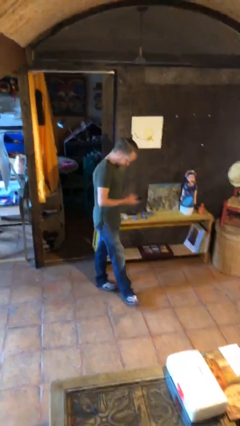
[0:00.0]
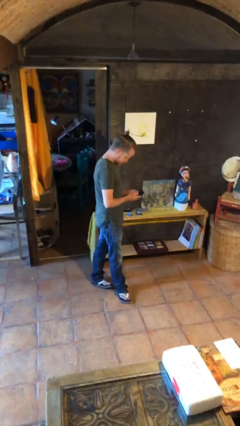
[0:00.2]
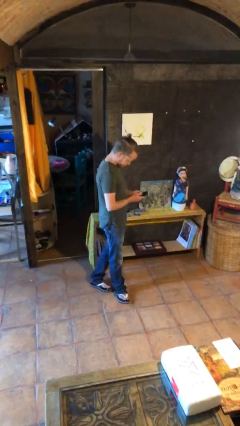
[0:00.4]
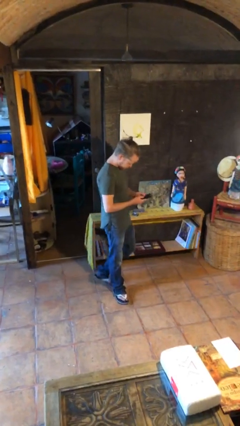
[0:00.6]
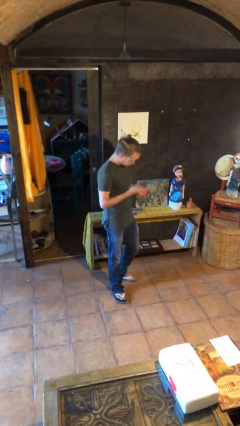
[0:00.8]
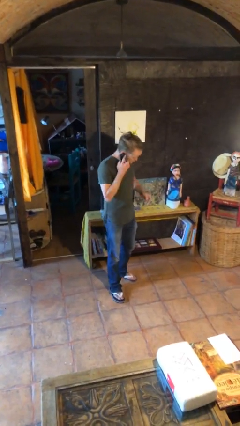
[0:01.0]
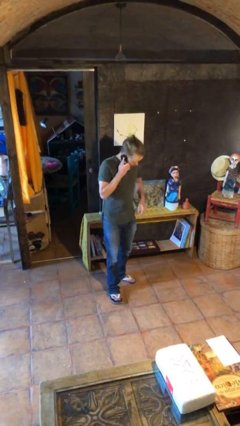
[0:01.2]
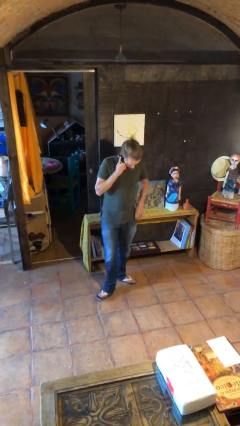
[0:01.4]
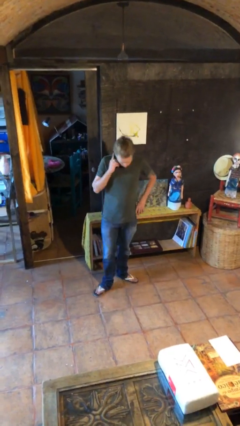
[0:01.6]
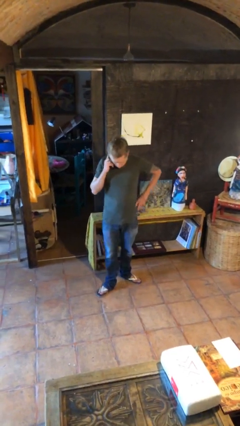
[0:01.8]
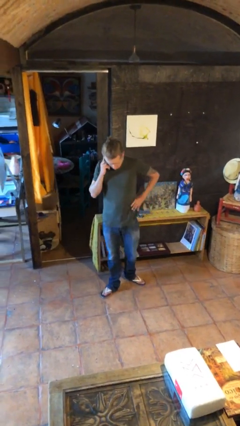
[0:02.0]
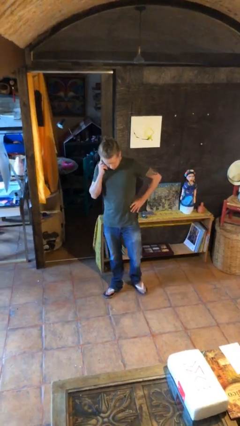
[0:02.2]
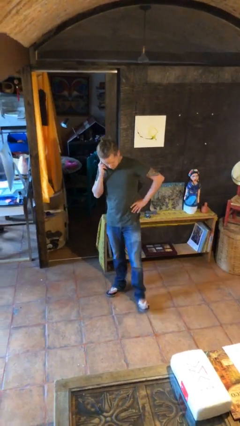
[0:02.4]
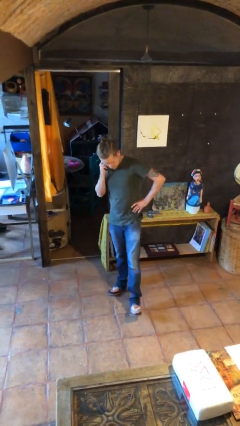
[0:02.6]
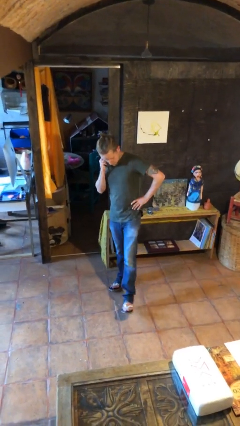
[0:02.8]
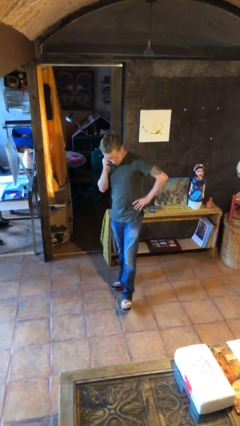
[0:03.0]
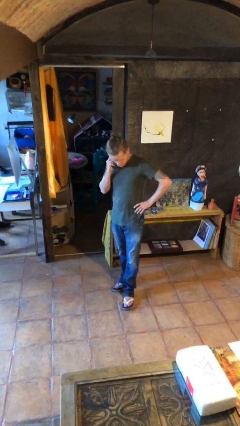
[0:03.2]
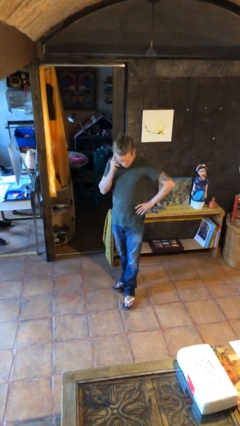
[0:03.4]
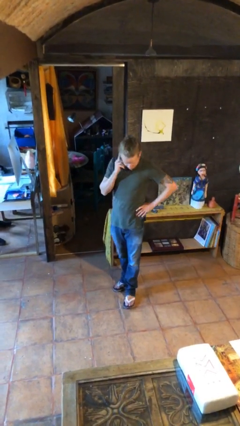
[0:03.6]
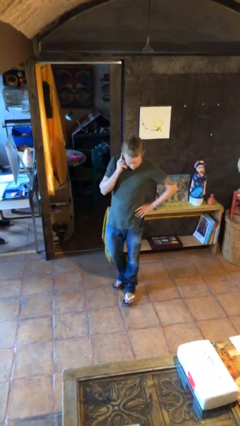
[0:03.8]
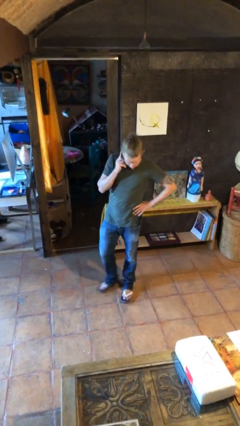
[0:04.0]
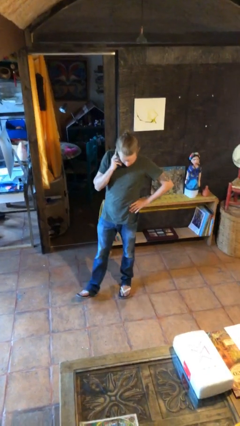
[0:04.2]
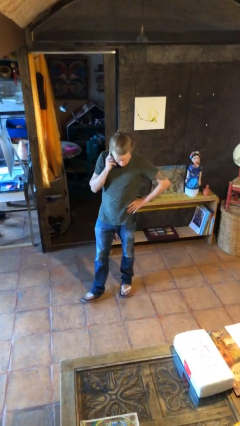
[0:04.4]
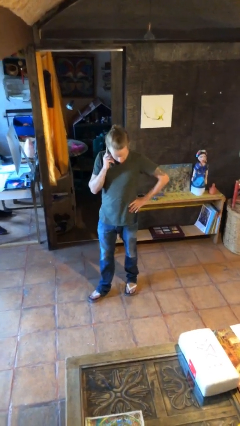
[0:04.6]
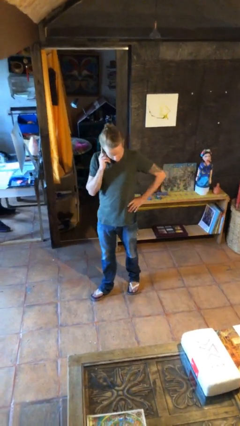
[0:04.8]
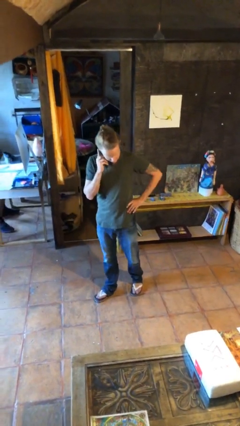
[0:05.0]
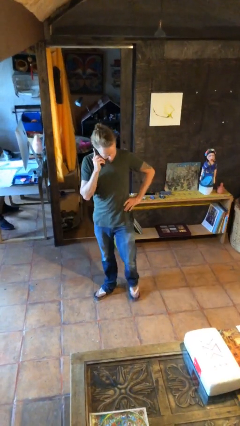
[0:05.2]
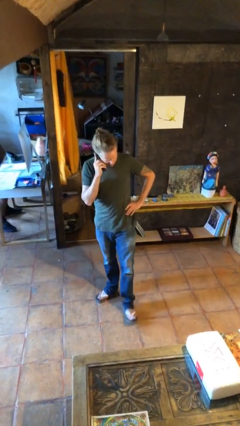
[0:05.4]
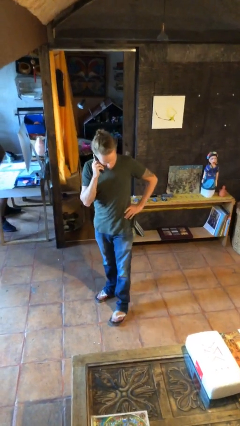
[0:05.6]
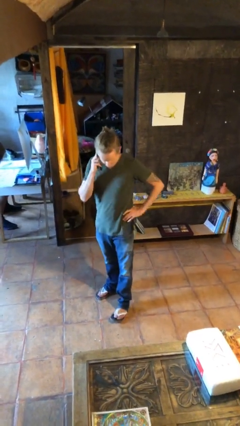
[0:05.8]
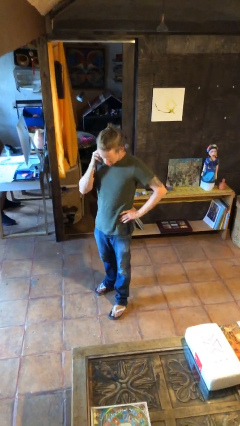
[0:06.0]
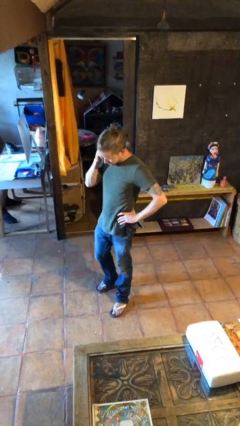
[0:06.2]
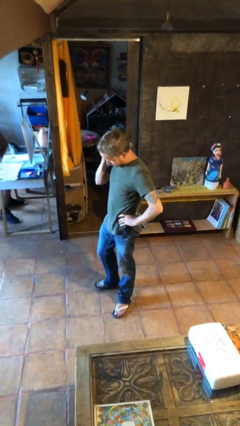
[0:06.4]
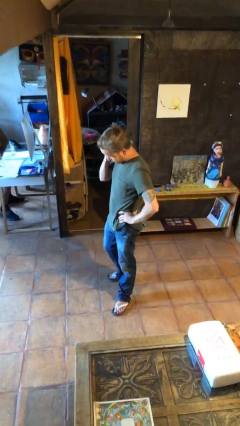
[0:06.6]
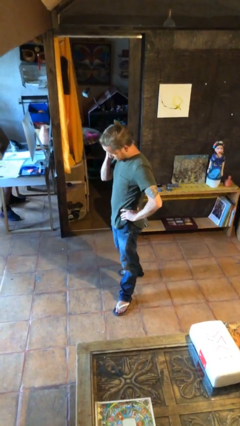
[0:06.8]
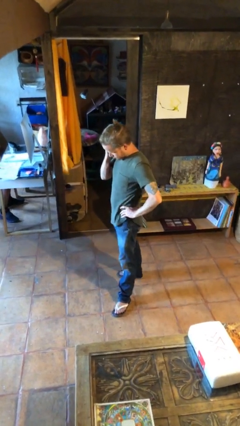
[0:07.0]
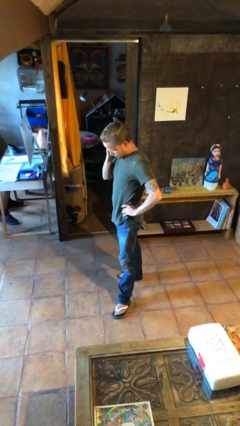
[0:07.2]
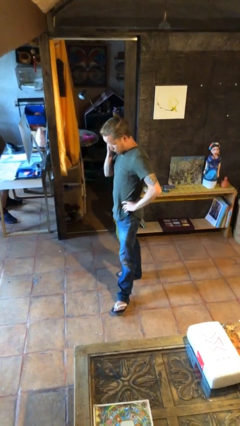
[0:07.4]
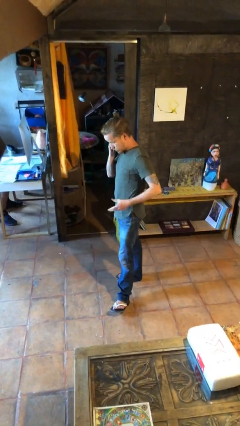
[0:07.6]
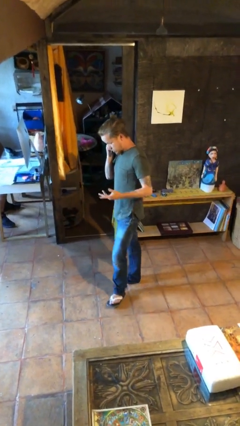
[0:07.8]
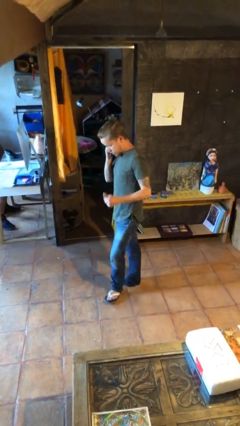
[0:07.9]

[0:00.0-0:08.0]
person talks on phone

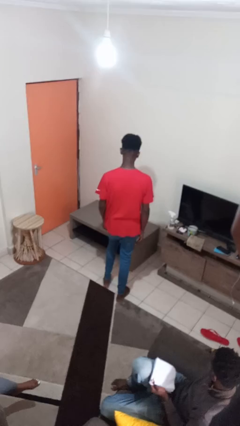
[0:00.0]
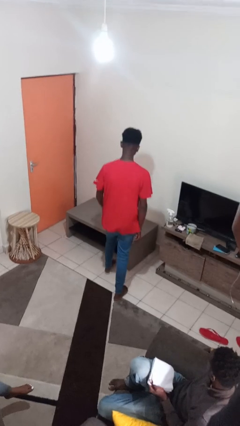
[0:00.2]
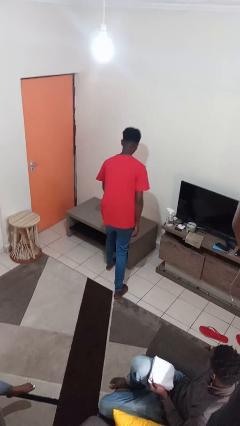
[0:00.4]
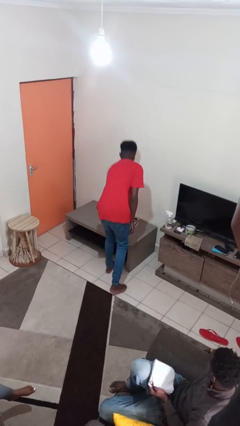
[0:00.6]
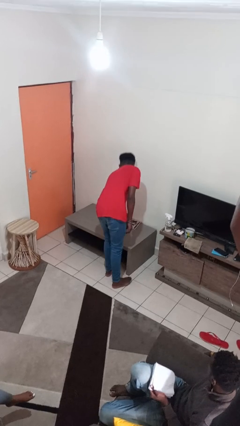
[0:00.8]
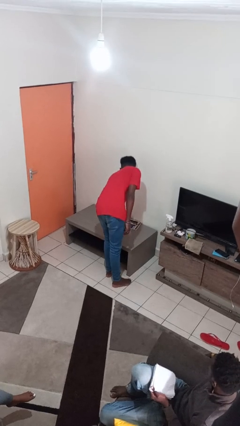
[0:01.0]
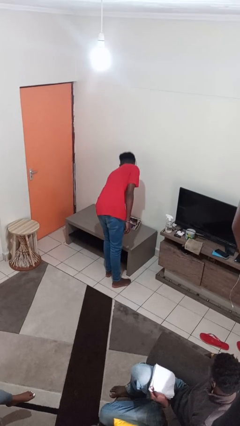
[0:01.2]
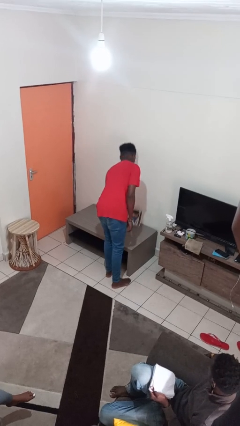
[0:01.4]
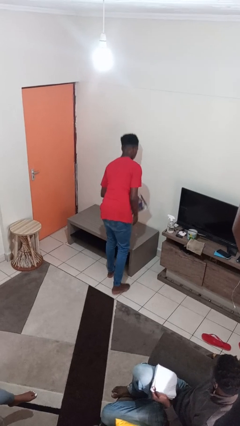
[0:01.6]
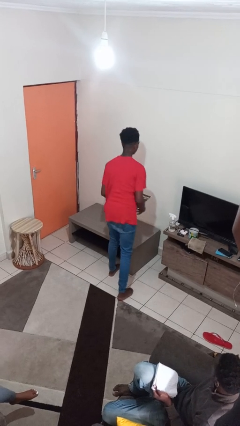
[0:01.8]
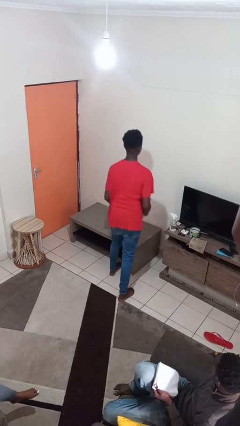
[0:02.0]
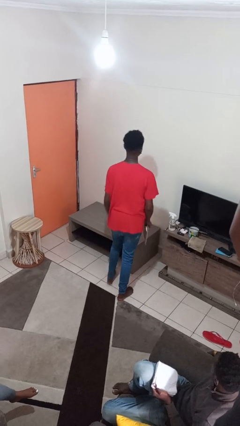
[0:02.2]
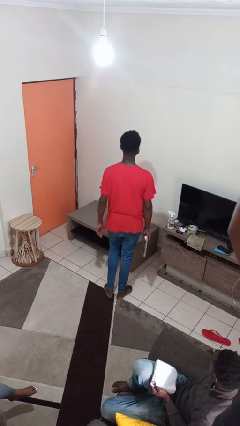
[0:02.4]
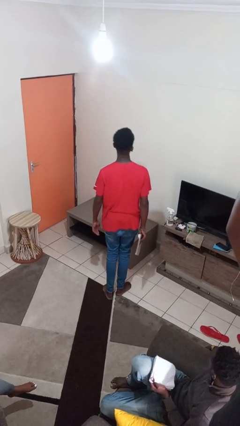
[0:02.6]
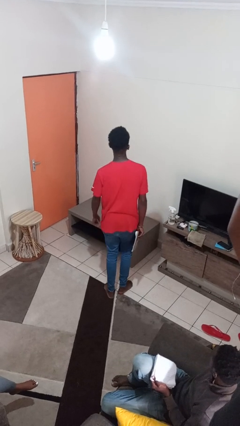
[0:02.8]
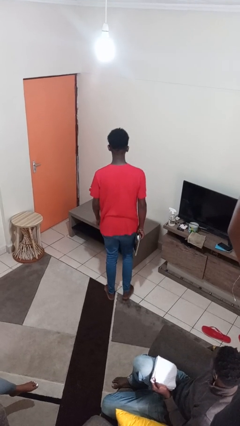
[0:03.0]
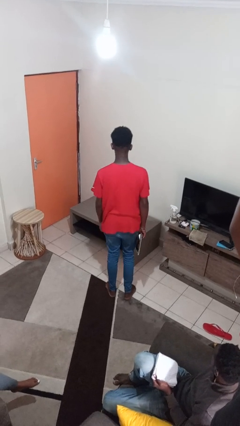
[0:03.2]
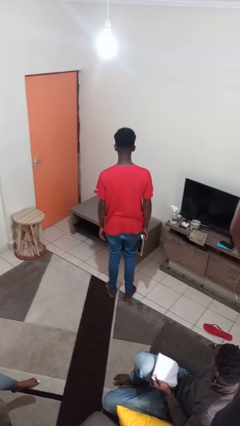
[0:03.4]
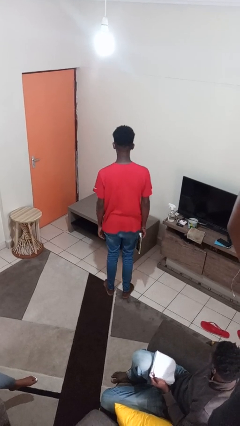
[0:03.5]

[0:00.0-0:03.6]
person picks up object from table

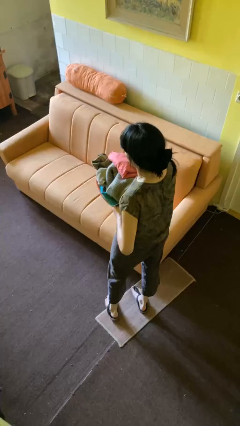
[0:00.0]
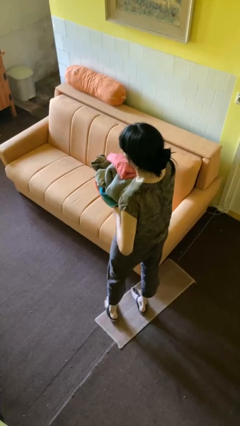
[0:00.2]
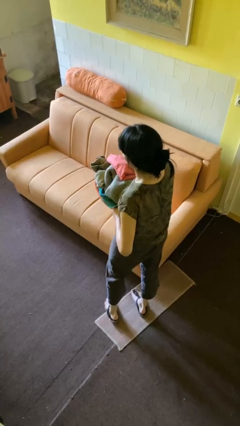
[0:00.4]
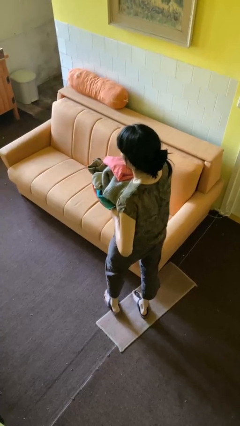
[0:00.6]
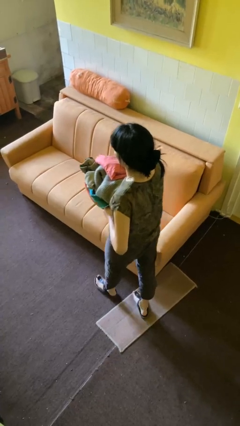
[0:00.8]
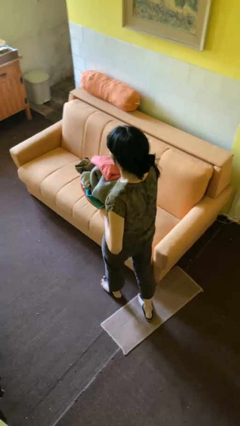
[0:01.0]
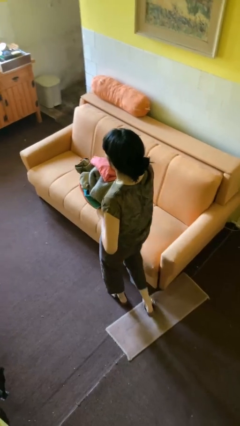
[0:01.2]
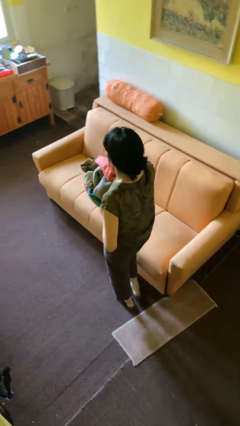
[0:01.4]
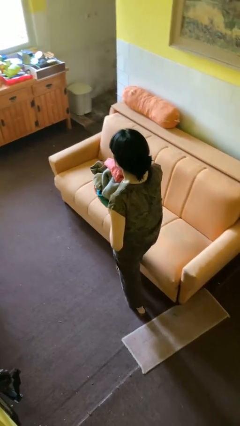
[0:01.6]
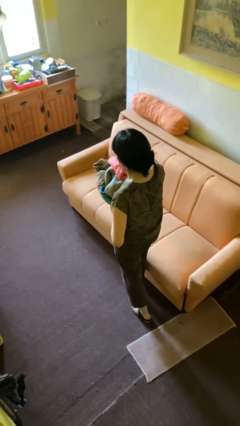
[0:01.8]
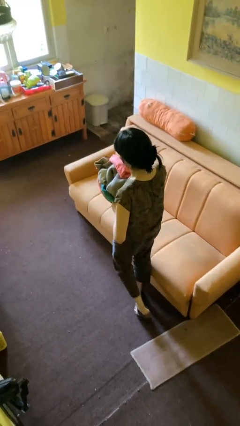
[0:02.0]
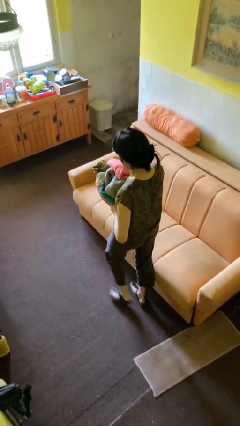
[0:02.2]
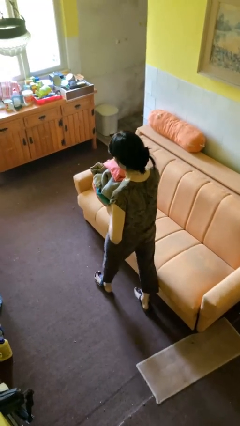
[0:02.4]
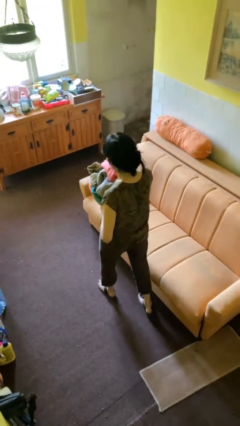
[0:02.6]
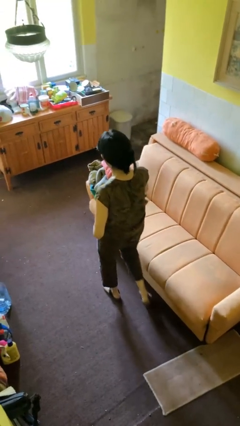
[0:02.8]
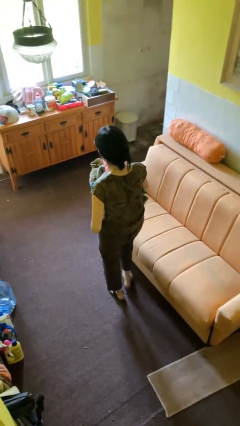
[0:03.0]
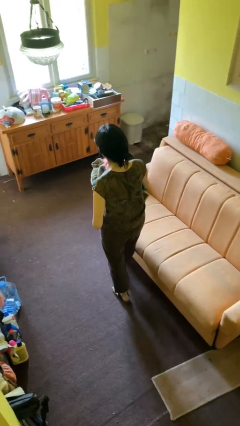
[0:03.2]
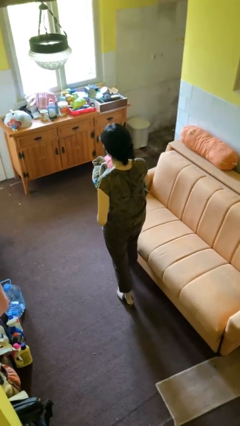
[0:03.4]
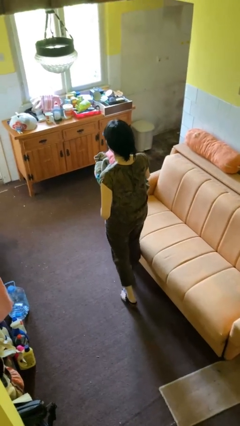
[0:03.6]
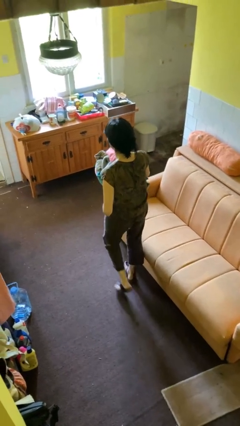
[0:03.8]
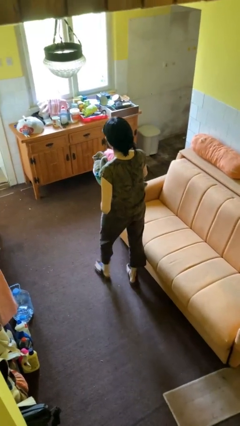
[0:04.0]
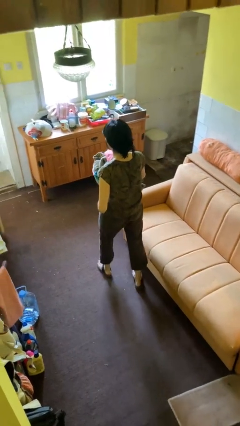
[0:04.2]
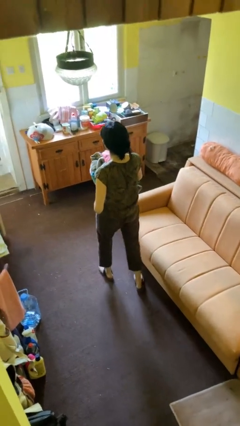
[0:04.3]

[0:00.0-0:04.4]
person carries laundry basket

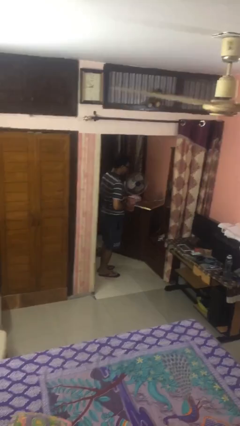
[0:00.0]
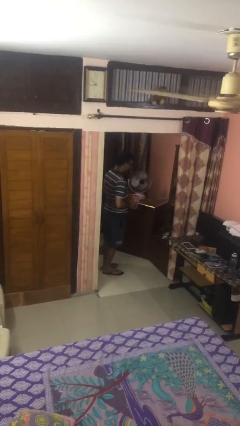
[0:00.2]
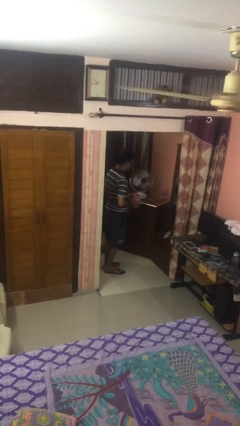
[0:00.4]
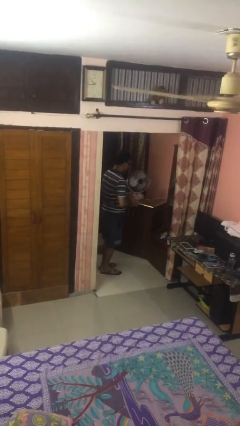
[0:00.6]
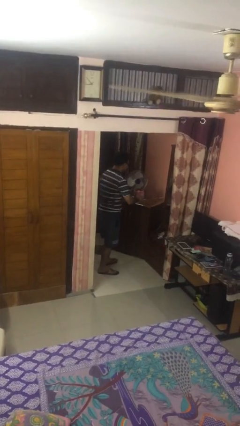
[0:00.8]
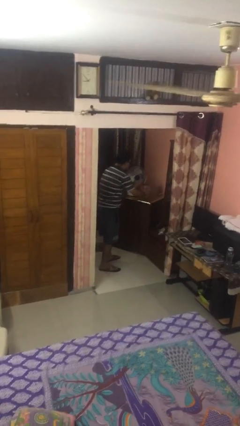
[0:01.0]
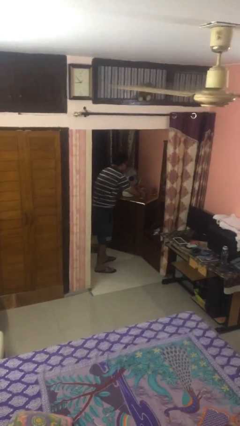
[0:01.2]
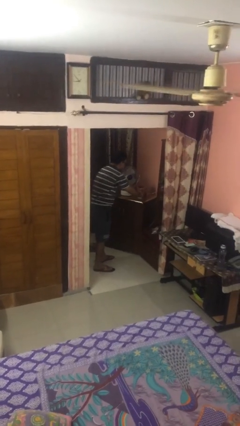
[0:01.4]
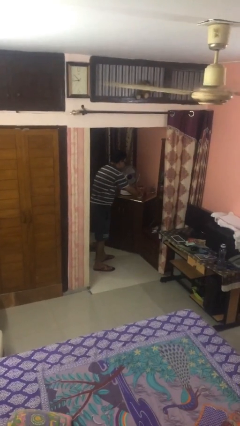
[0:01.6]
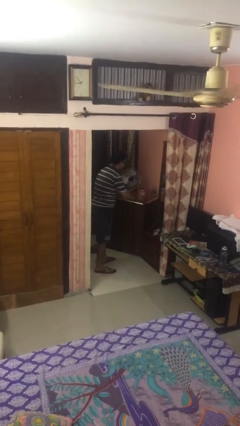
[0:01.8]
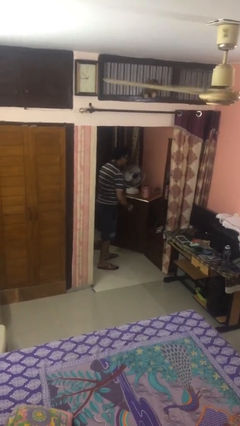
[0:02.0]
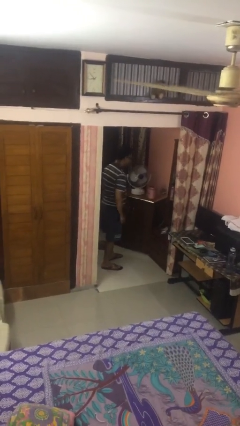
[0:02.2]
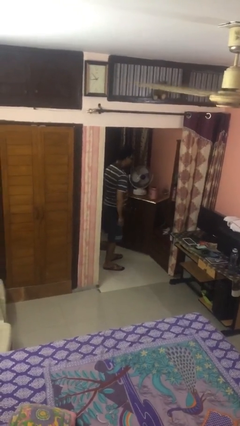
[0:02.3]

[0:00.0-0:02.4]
person puts down object on countertop
